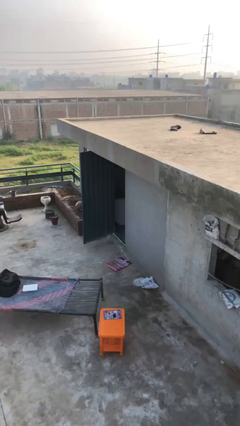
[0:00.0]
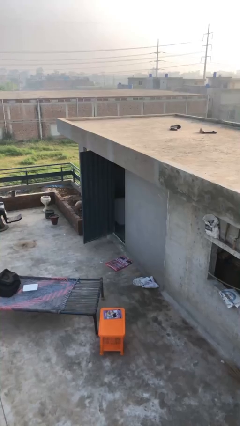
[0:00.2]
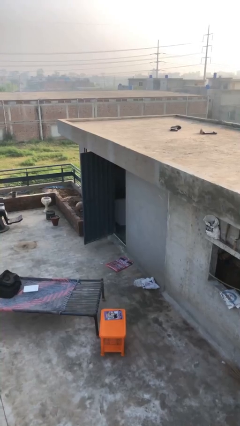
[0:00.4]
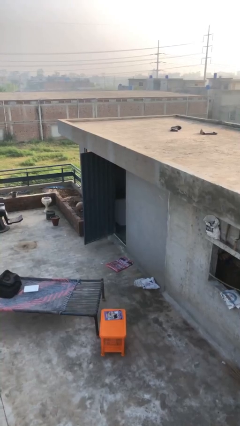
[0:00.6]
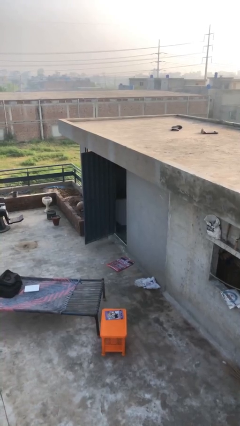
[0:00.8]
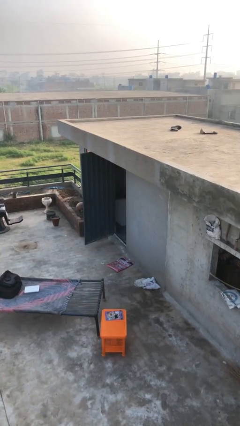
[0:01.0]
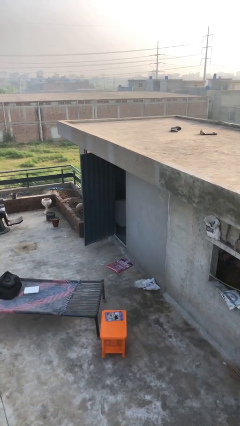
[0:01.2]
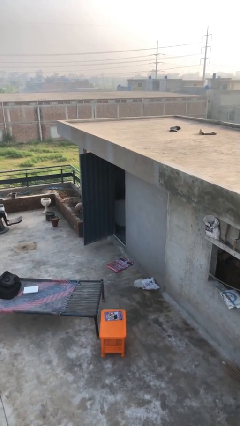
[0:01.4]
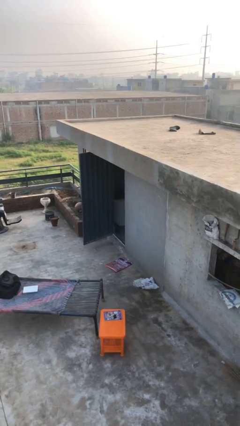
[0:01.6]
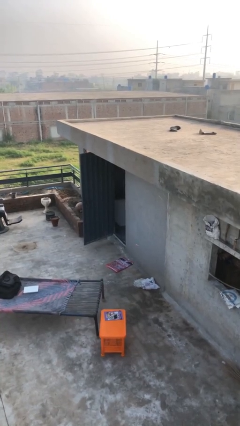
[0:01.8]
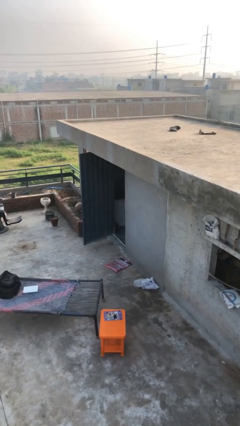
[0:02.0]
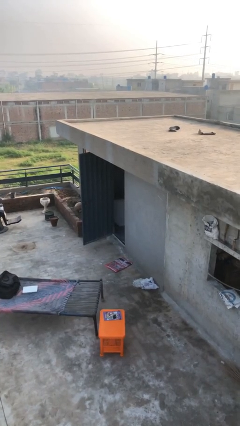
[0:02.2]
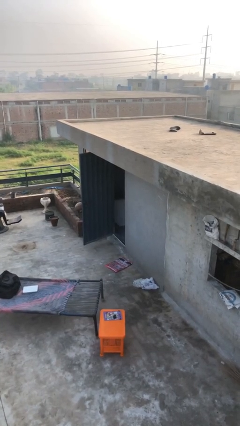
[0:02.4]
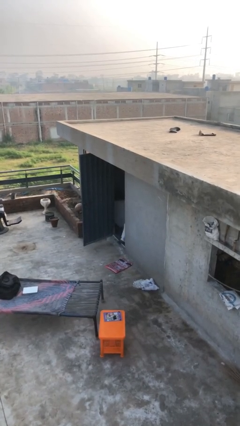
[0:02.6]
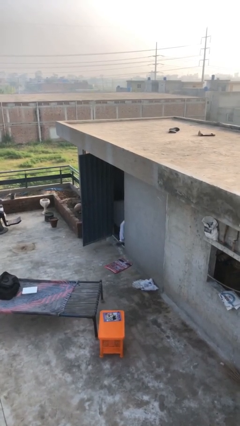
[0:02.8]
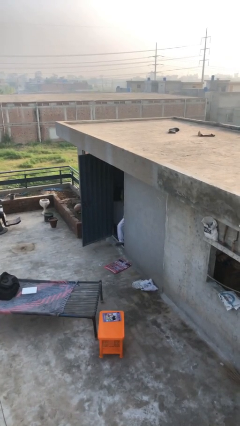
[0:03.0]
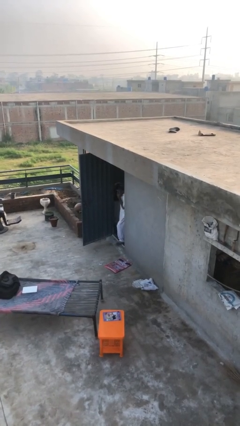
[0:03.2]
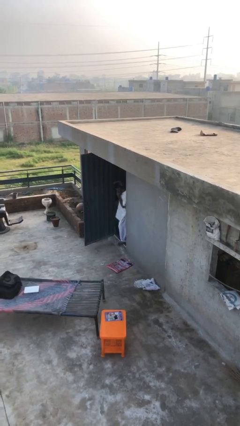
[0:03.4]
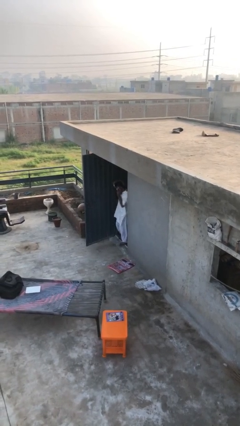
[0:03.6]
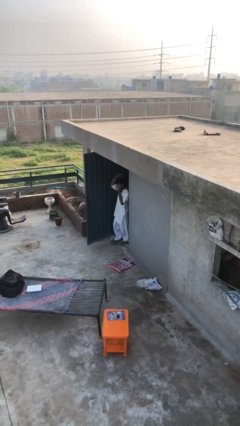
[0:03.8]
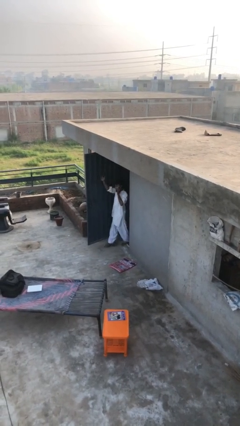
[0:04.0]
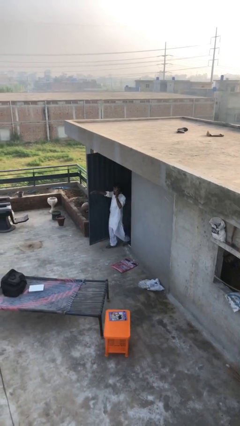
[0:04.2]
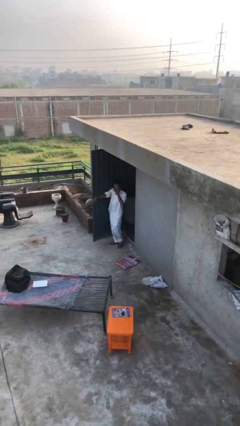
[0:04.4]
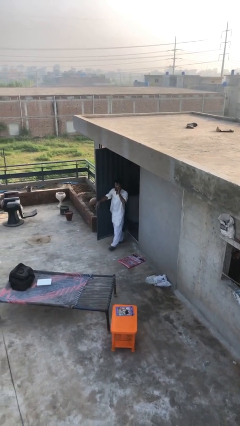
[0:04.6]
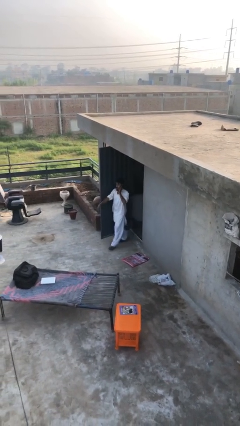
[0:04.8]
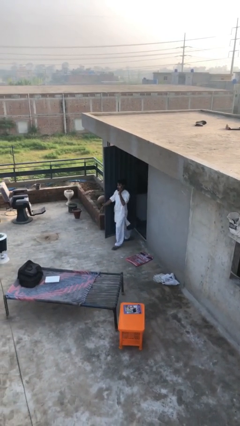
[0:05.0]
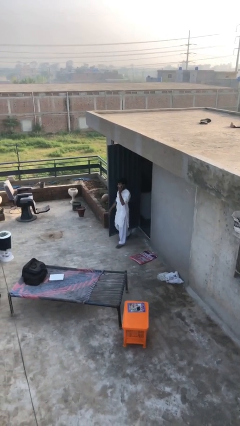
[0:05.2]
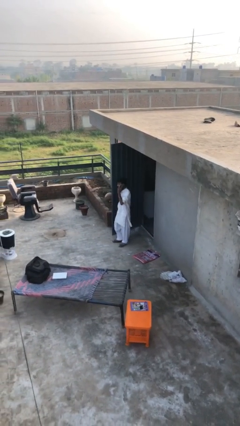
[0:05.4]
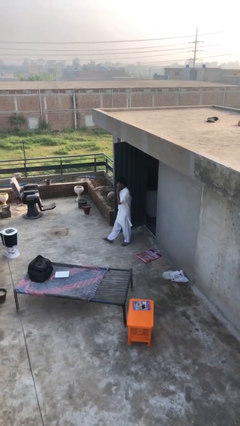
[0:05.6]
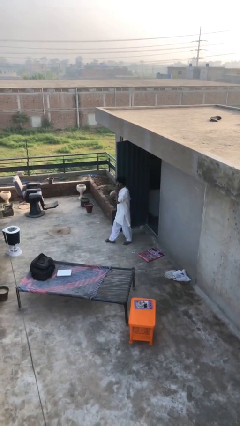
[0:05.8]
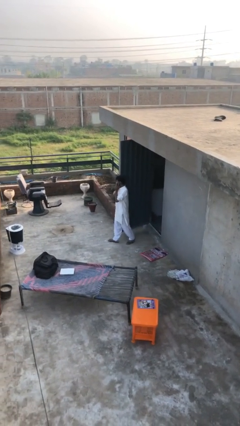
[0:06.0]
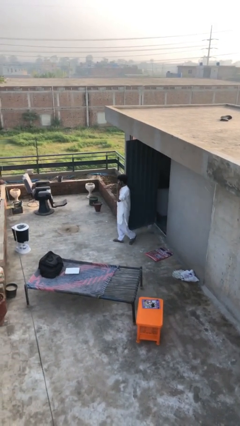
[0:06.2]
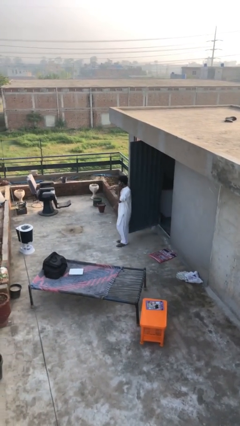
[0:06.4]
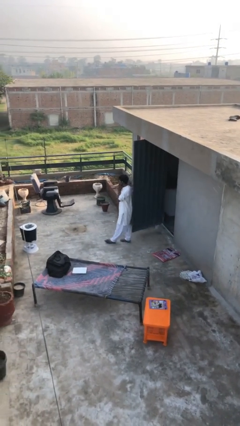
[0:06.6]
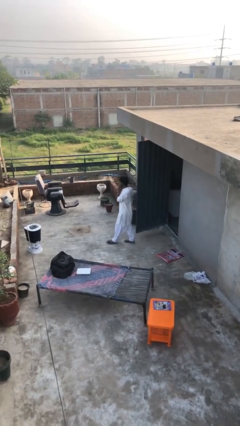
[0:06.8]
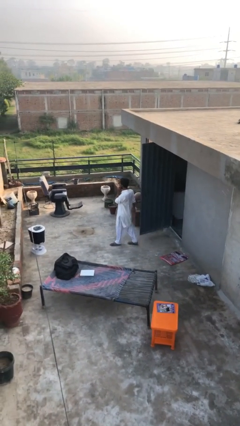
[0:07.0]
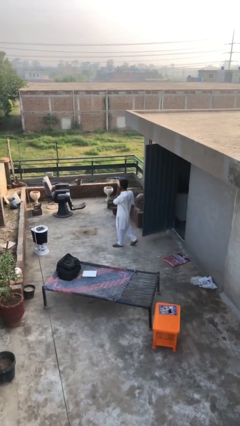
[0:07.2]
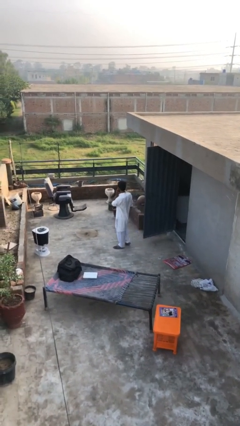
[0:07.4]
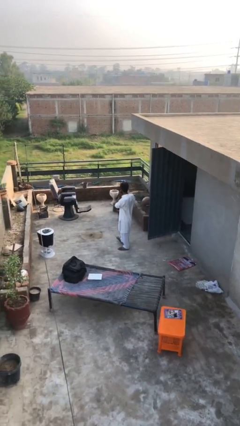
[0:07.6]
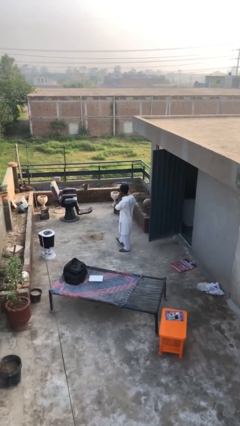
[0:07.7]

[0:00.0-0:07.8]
person enters scene through structure

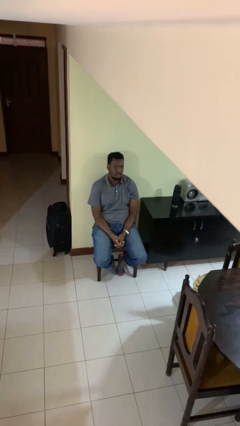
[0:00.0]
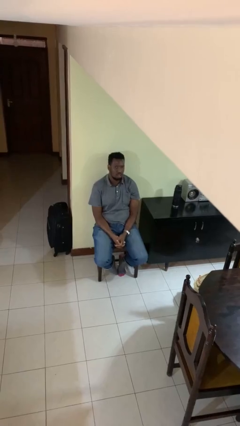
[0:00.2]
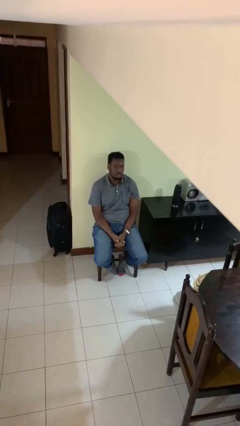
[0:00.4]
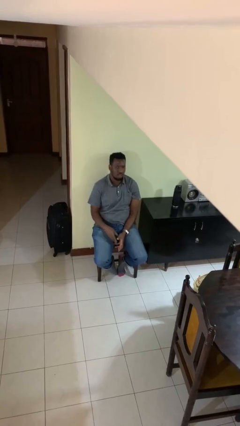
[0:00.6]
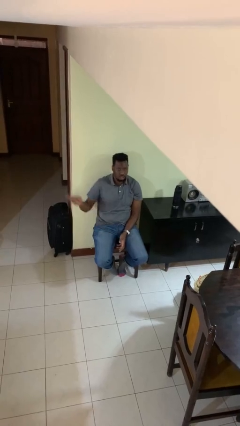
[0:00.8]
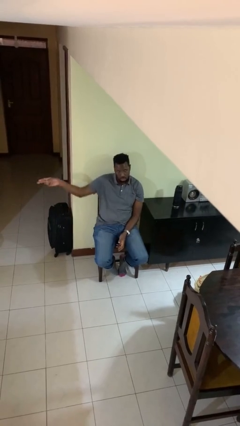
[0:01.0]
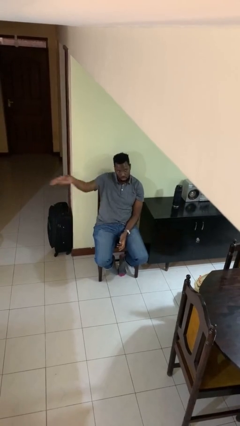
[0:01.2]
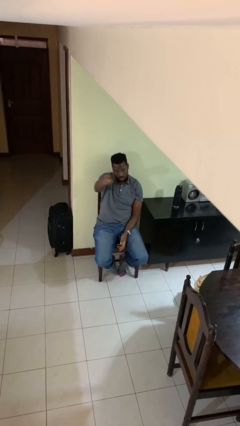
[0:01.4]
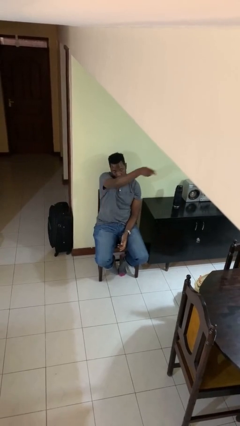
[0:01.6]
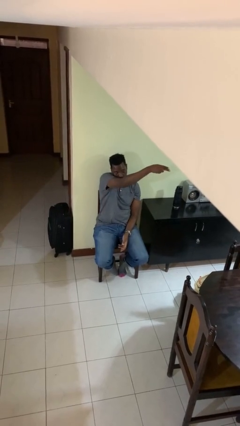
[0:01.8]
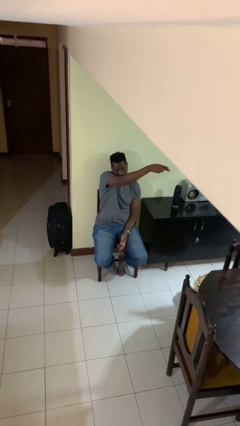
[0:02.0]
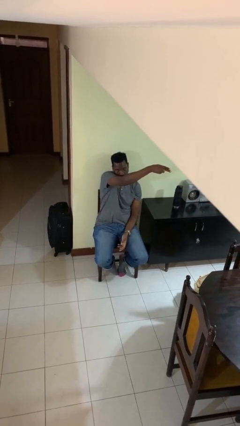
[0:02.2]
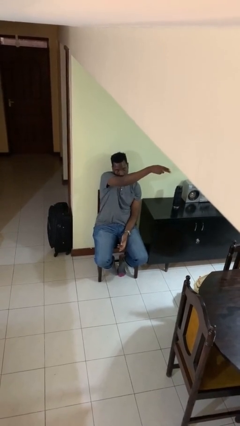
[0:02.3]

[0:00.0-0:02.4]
person gestures swipe left

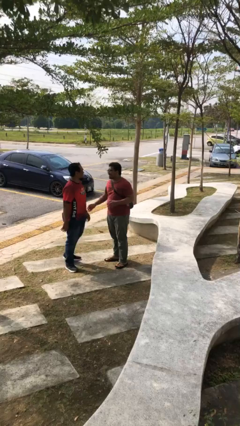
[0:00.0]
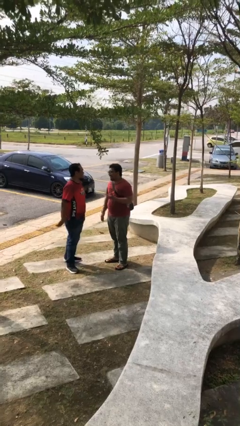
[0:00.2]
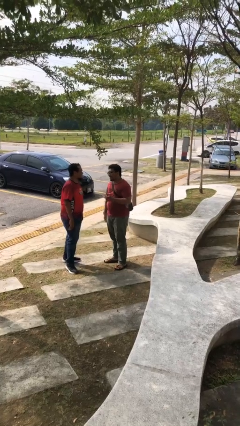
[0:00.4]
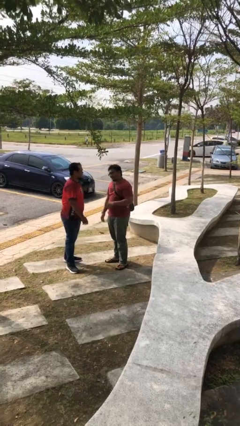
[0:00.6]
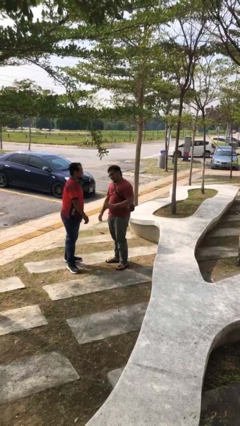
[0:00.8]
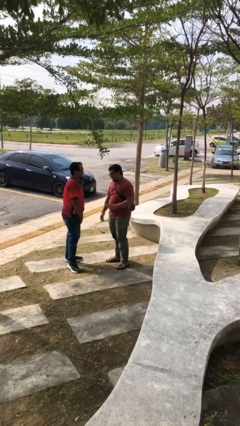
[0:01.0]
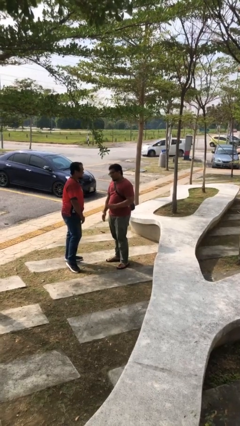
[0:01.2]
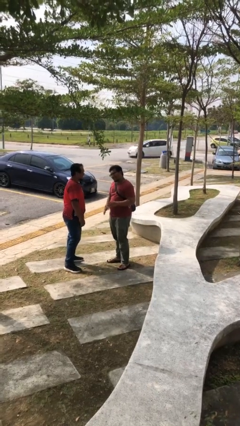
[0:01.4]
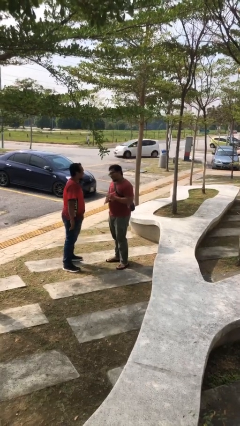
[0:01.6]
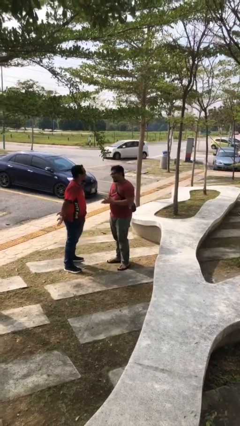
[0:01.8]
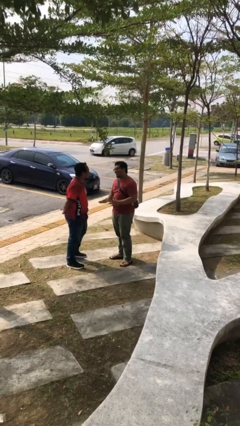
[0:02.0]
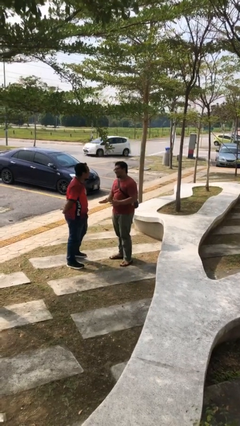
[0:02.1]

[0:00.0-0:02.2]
person talks to person

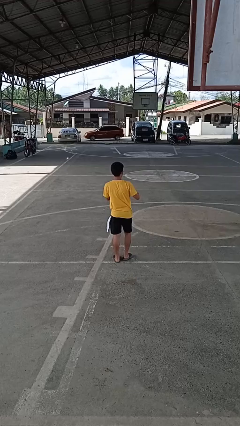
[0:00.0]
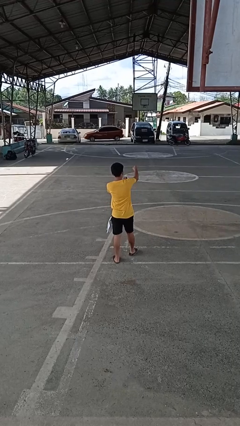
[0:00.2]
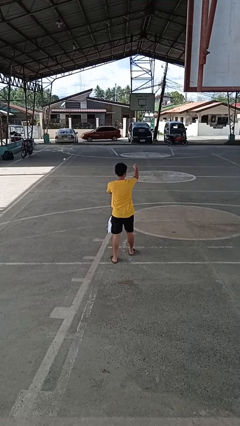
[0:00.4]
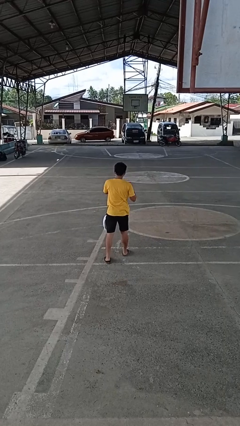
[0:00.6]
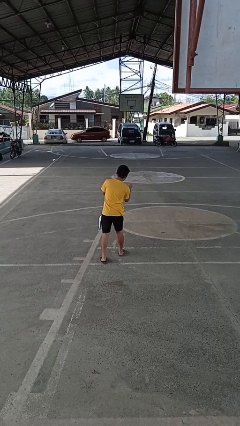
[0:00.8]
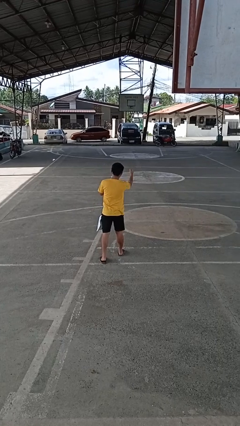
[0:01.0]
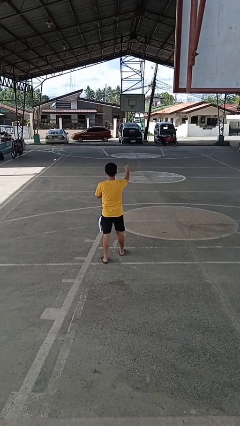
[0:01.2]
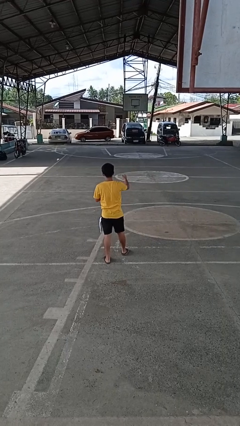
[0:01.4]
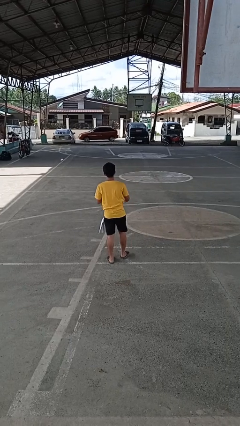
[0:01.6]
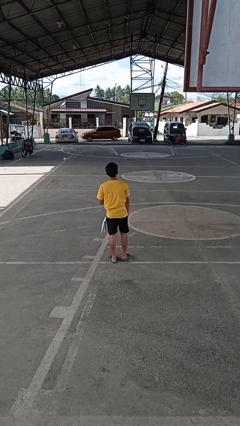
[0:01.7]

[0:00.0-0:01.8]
person punches

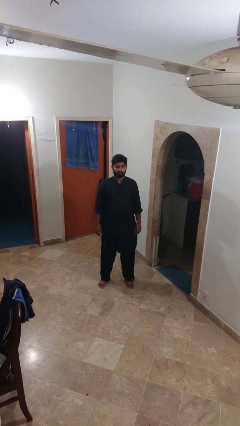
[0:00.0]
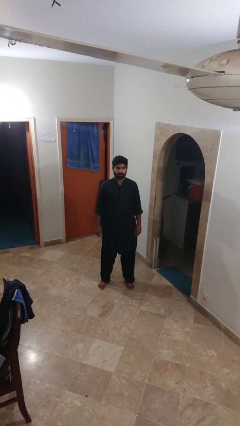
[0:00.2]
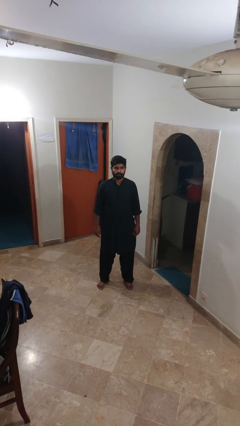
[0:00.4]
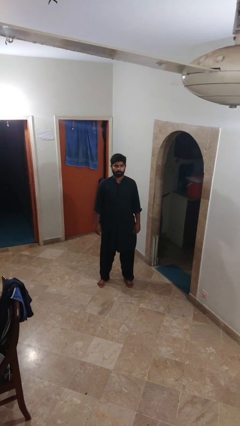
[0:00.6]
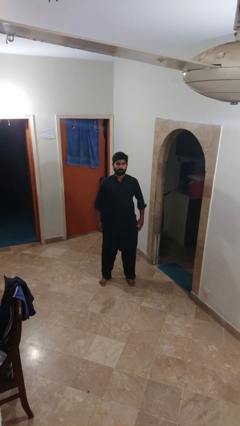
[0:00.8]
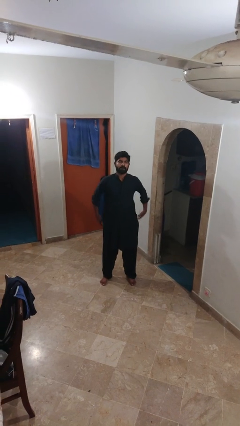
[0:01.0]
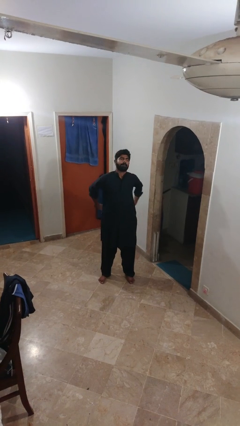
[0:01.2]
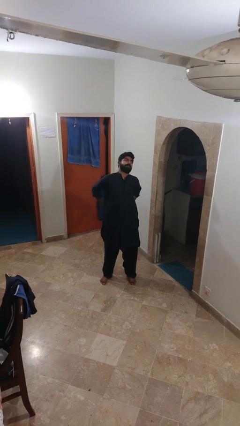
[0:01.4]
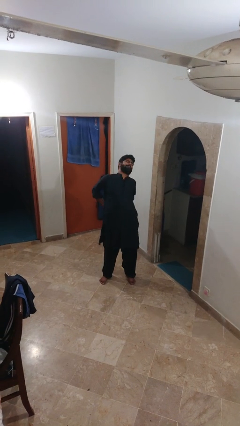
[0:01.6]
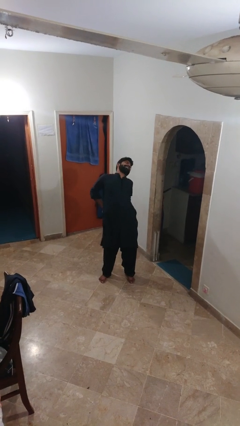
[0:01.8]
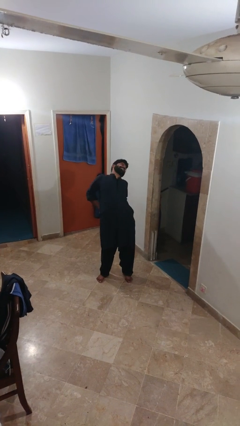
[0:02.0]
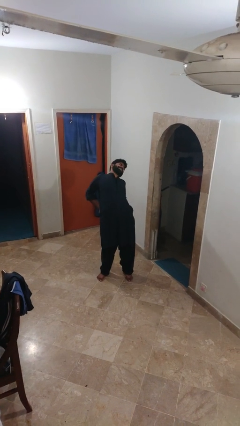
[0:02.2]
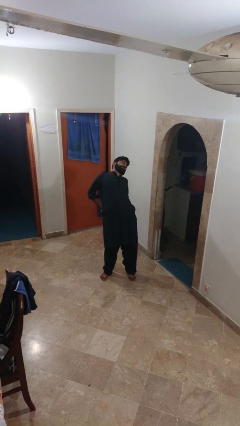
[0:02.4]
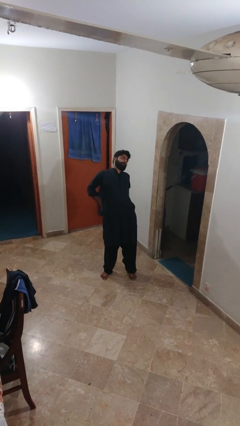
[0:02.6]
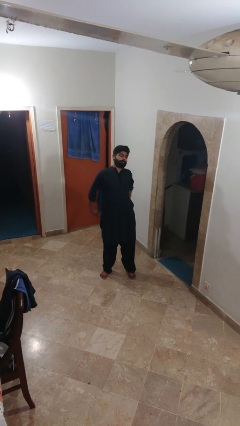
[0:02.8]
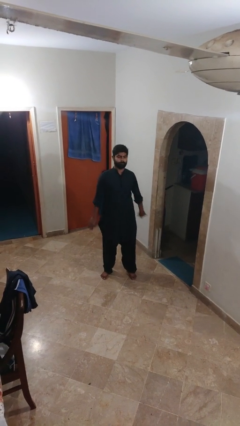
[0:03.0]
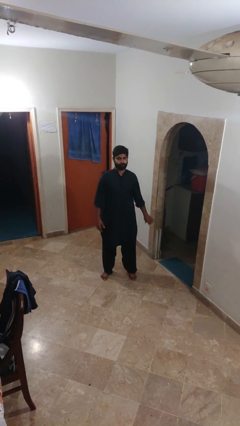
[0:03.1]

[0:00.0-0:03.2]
person stretches back
